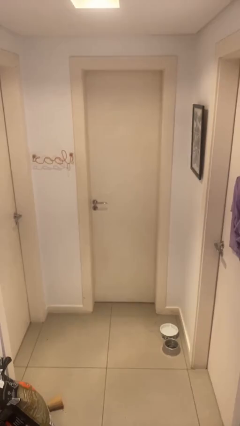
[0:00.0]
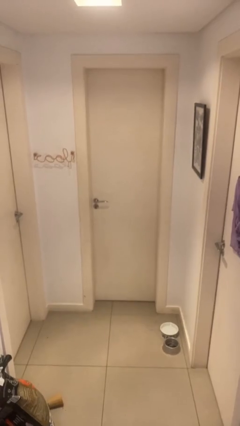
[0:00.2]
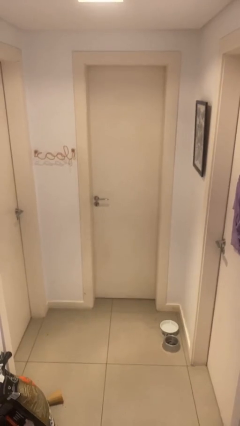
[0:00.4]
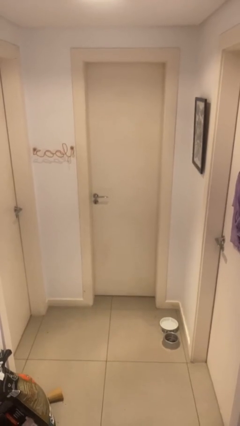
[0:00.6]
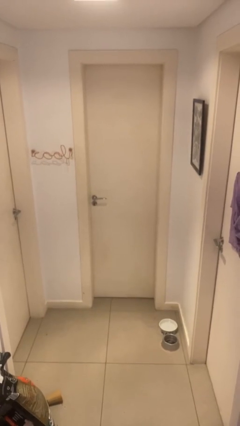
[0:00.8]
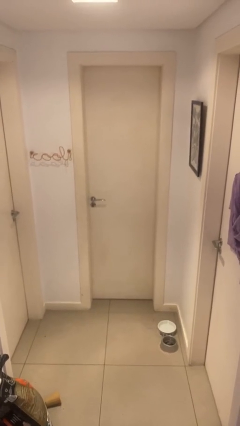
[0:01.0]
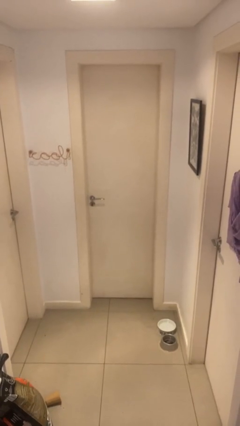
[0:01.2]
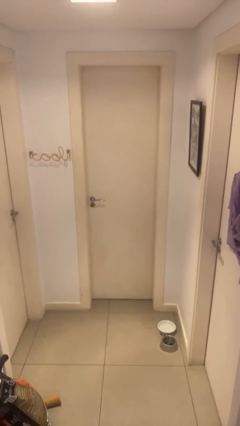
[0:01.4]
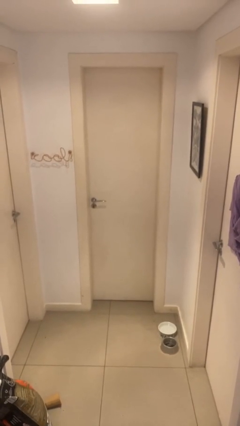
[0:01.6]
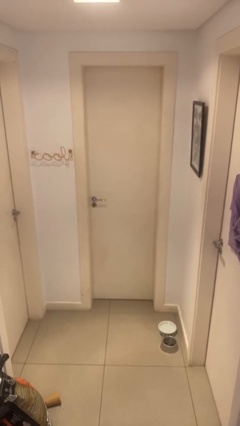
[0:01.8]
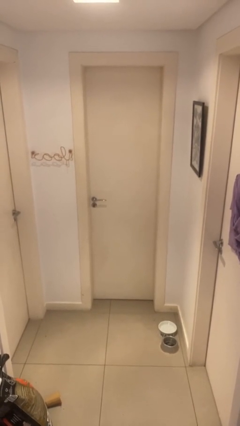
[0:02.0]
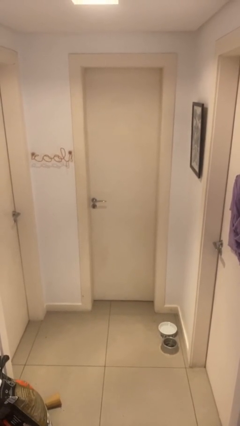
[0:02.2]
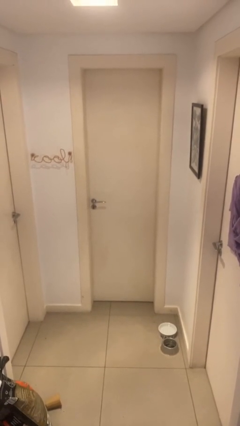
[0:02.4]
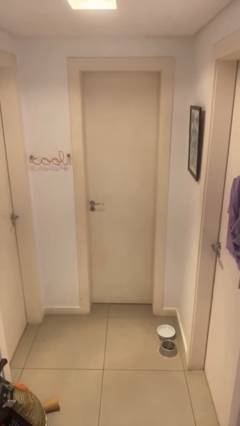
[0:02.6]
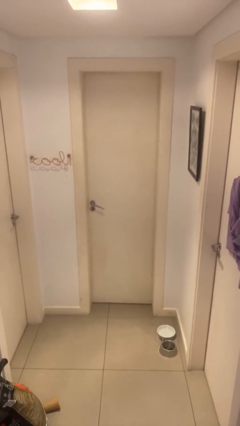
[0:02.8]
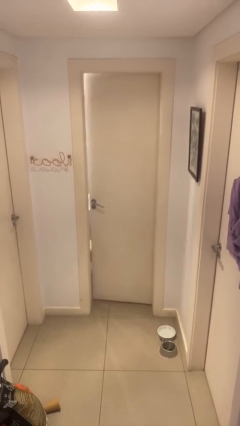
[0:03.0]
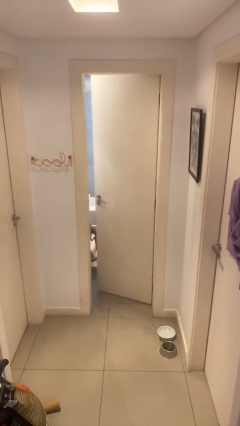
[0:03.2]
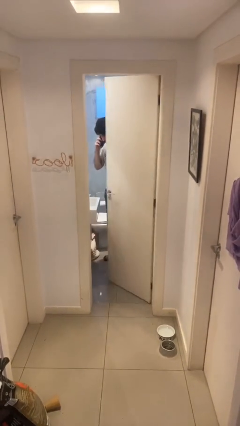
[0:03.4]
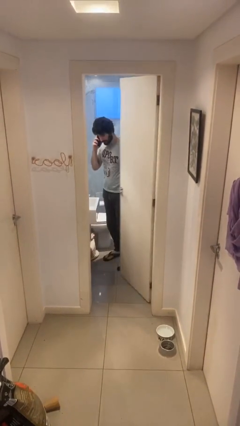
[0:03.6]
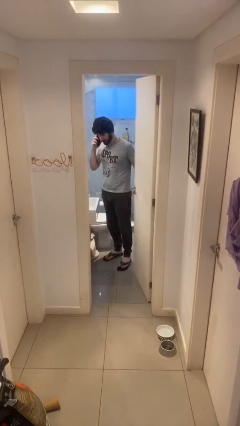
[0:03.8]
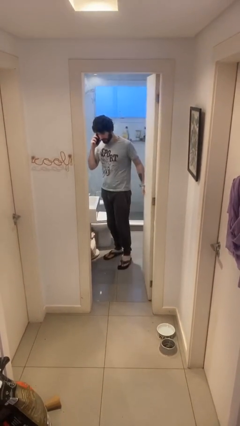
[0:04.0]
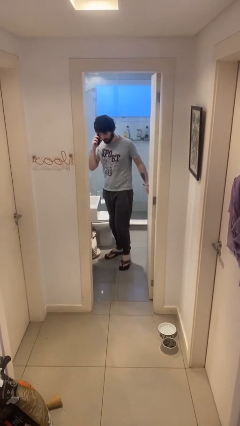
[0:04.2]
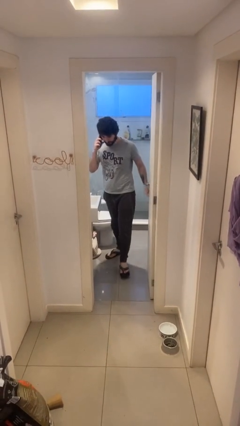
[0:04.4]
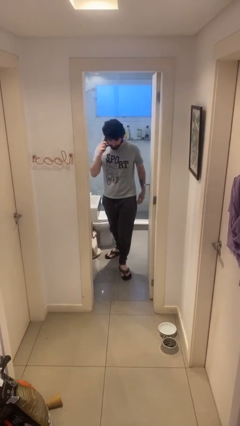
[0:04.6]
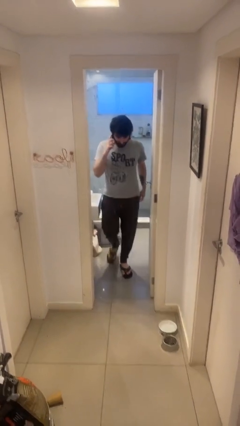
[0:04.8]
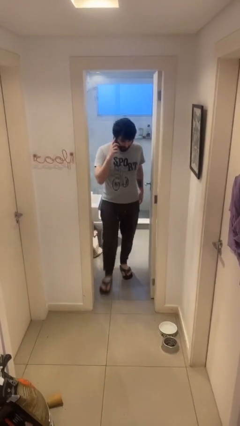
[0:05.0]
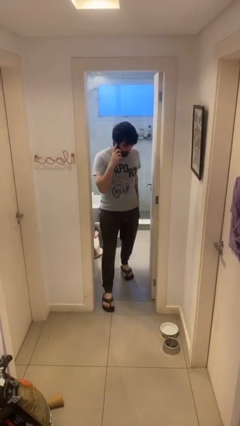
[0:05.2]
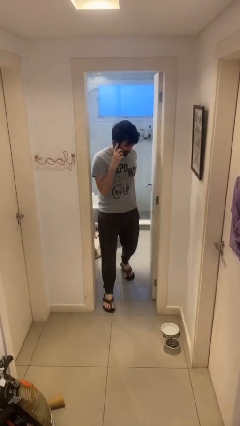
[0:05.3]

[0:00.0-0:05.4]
person opens facility door

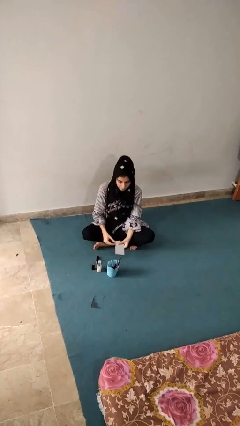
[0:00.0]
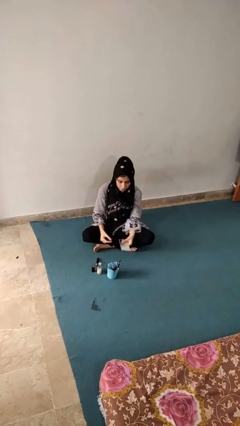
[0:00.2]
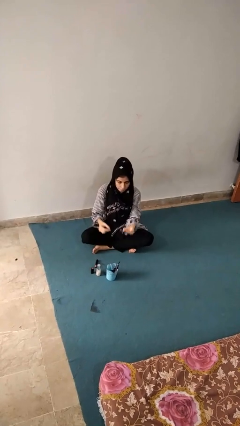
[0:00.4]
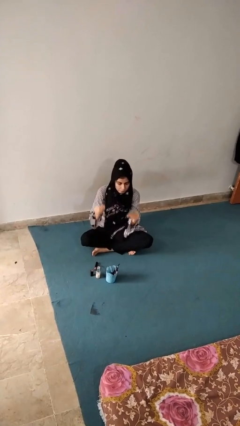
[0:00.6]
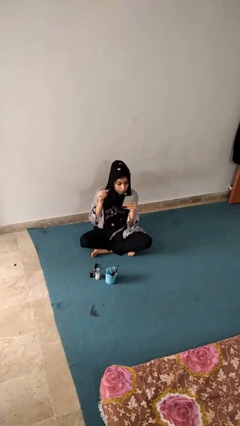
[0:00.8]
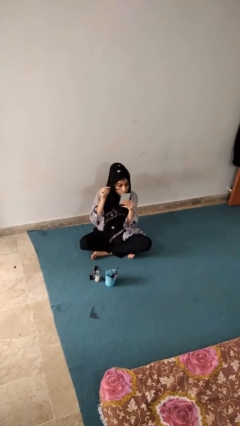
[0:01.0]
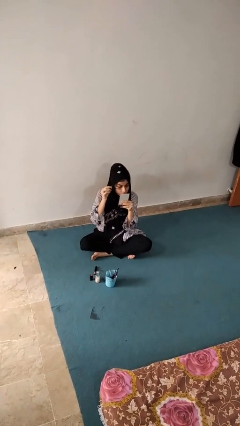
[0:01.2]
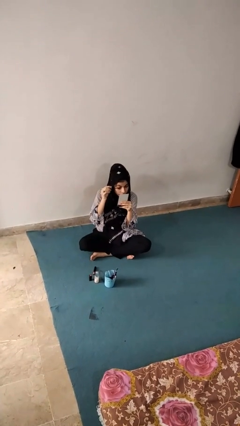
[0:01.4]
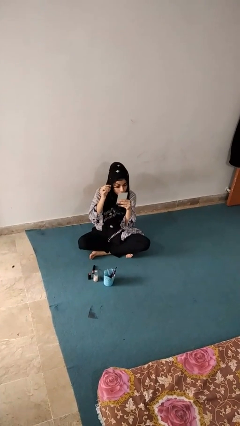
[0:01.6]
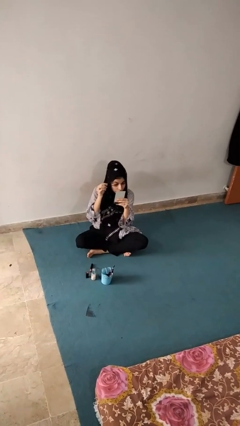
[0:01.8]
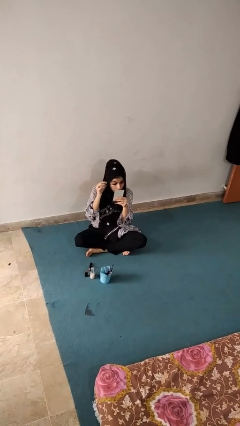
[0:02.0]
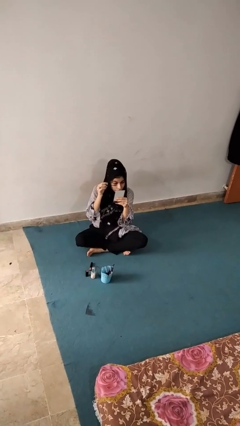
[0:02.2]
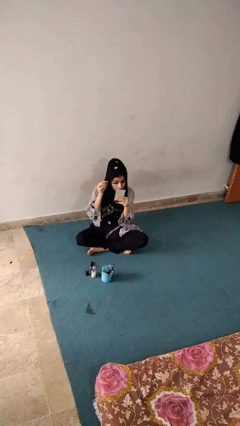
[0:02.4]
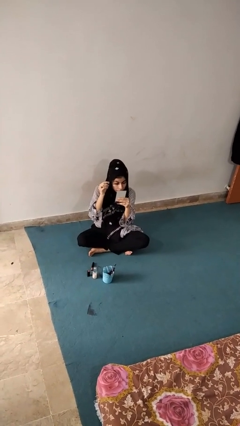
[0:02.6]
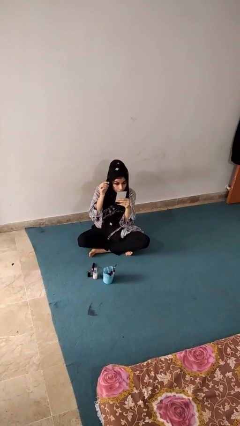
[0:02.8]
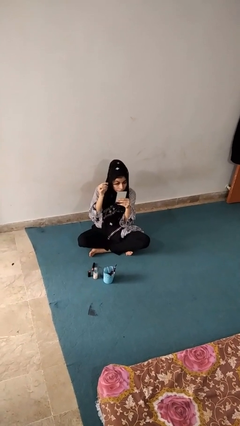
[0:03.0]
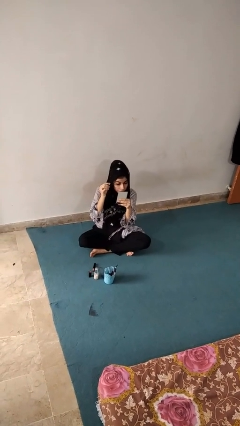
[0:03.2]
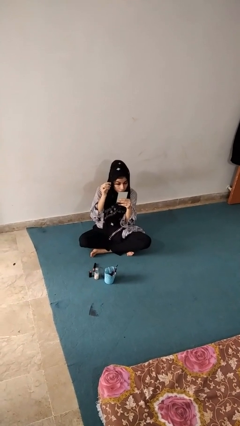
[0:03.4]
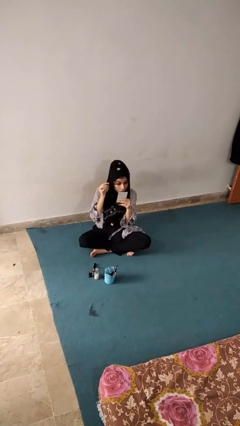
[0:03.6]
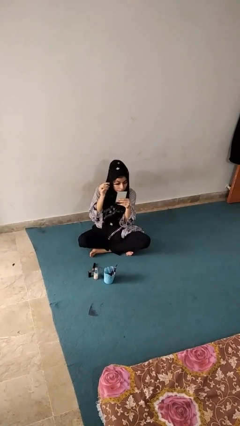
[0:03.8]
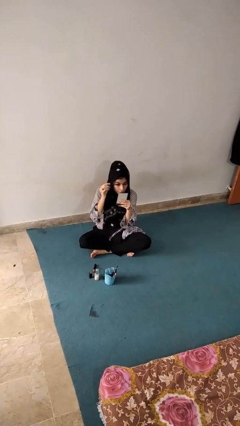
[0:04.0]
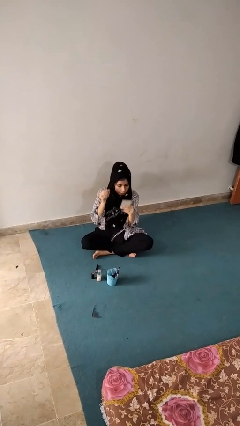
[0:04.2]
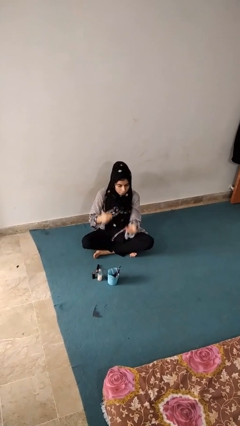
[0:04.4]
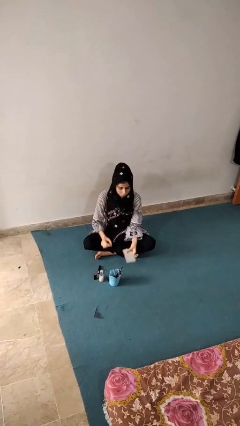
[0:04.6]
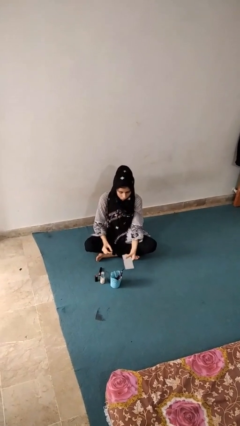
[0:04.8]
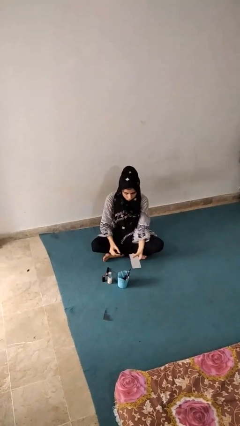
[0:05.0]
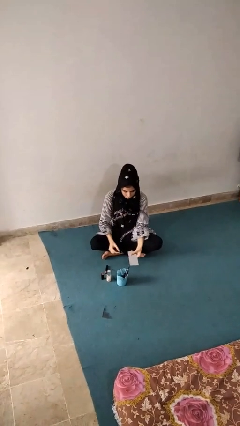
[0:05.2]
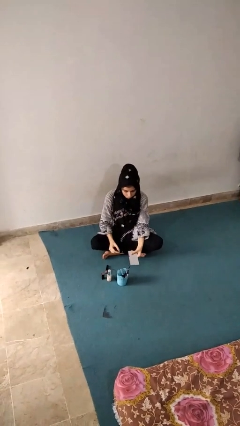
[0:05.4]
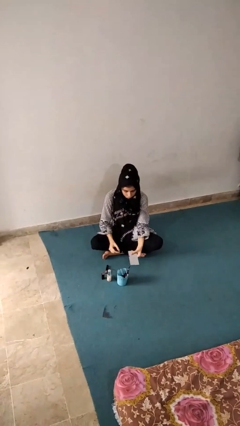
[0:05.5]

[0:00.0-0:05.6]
person applies eye makeup

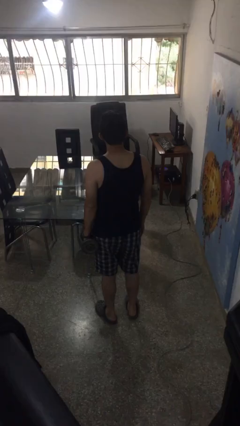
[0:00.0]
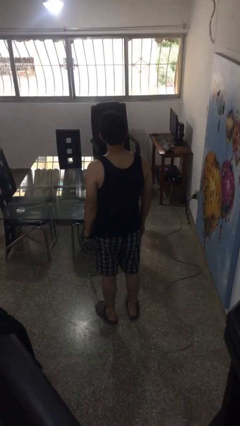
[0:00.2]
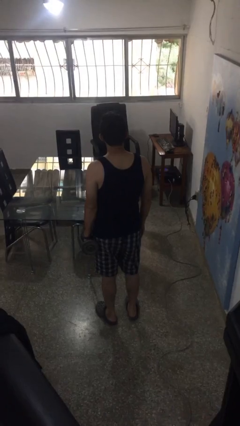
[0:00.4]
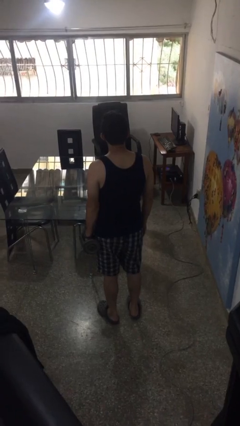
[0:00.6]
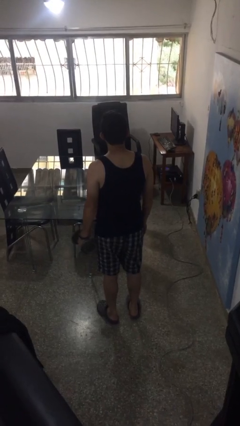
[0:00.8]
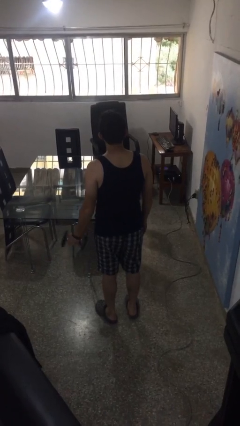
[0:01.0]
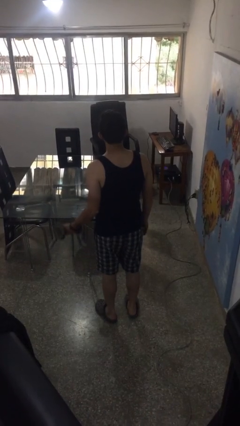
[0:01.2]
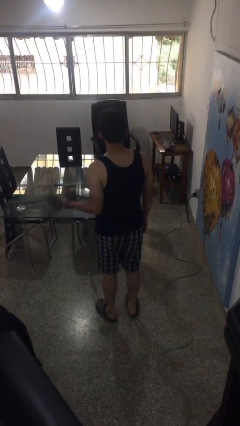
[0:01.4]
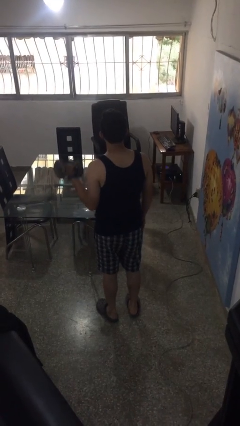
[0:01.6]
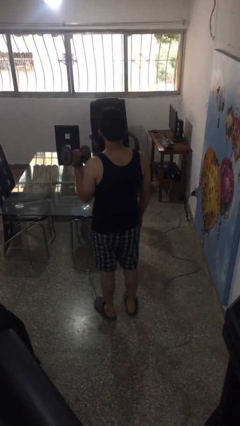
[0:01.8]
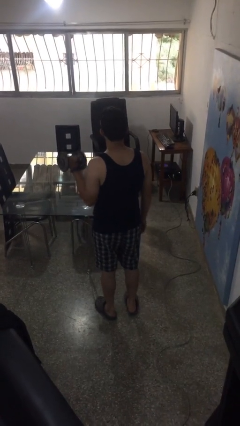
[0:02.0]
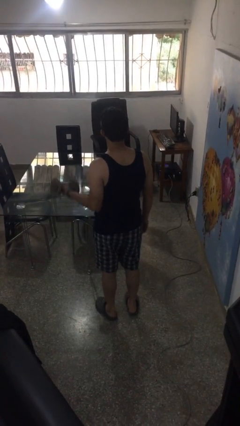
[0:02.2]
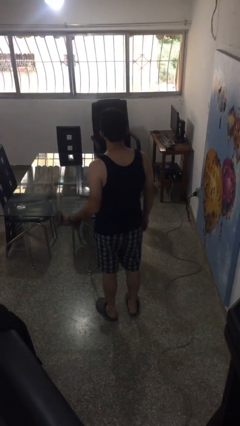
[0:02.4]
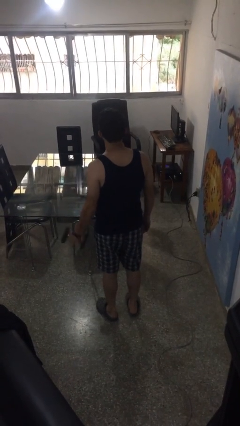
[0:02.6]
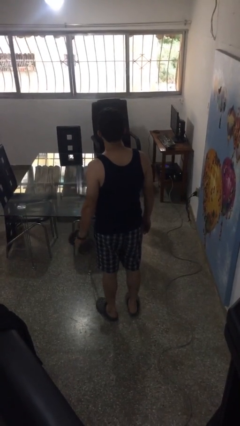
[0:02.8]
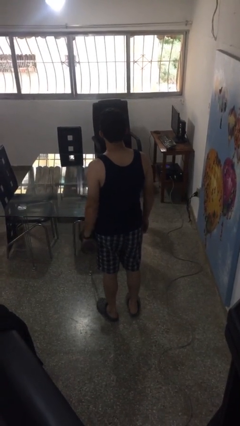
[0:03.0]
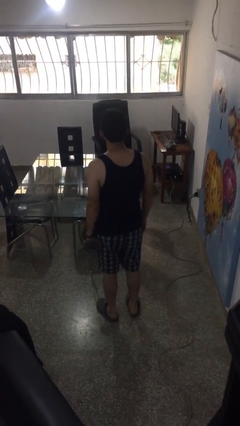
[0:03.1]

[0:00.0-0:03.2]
person lifts dumbbells

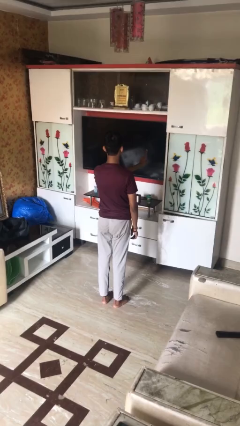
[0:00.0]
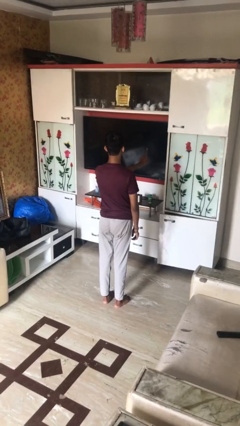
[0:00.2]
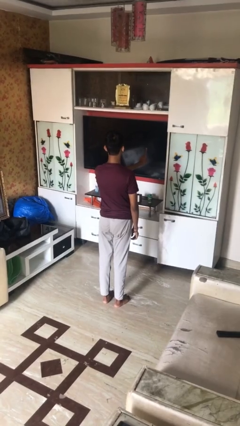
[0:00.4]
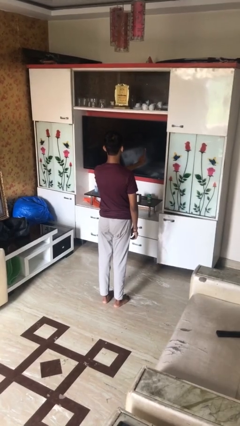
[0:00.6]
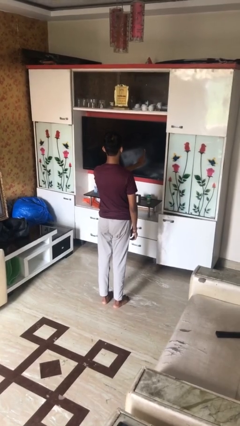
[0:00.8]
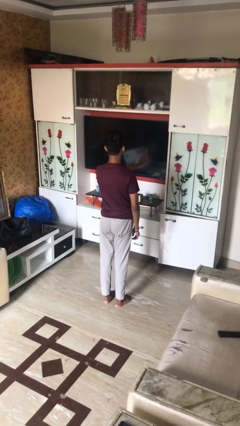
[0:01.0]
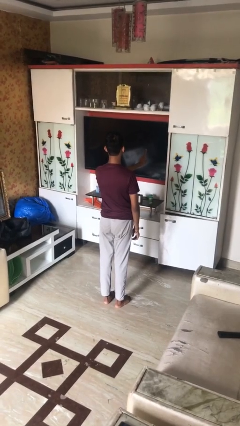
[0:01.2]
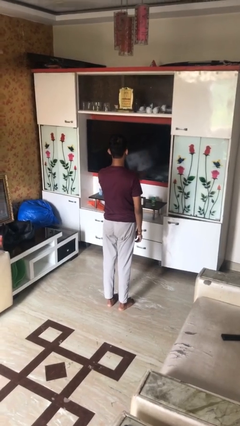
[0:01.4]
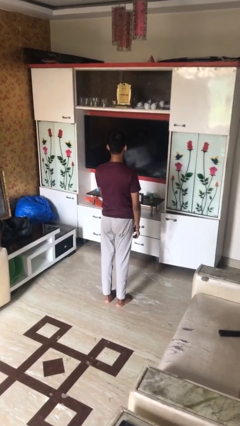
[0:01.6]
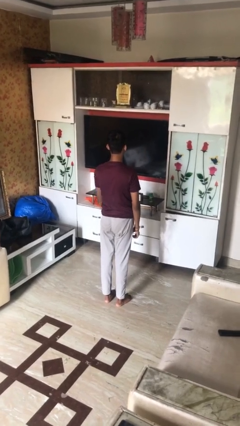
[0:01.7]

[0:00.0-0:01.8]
person gestures number one

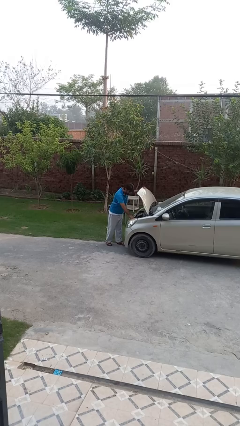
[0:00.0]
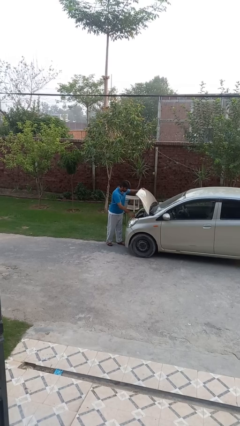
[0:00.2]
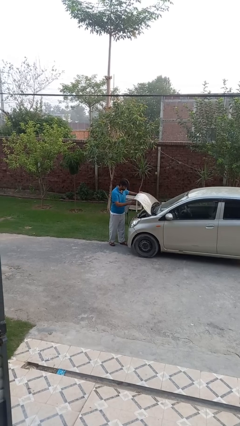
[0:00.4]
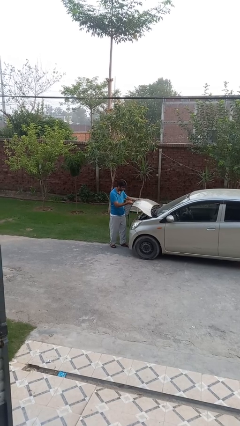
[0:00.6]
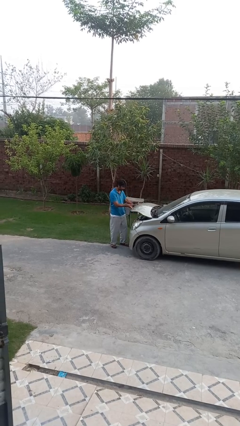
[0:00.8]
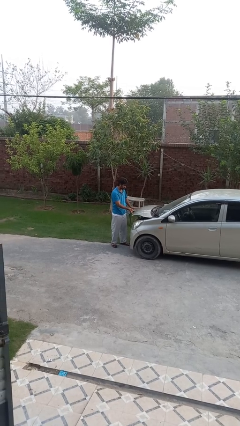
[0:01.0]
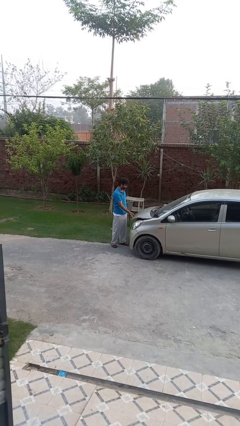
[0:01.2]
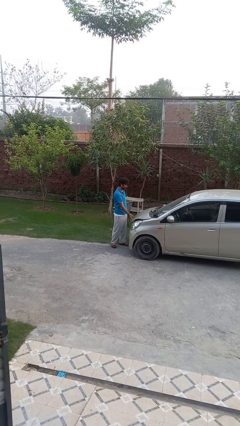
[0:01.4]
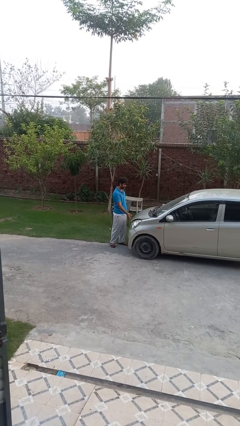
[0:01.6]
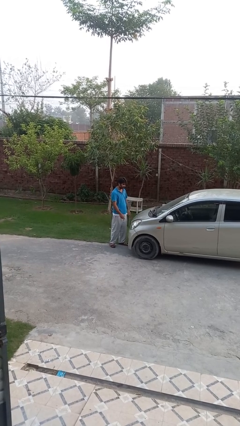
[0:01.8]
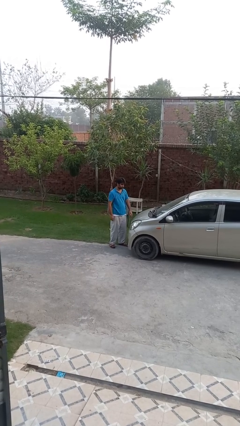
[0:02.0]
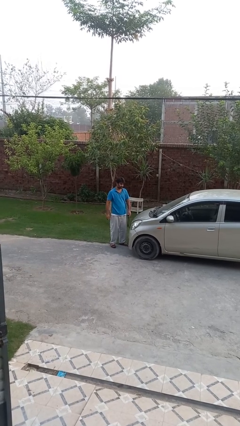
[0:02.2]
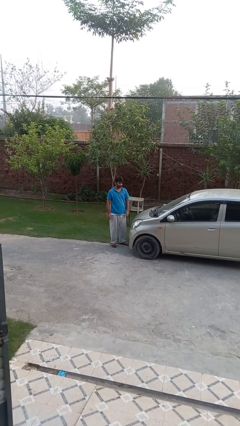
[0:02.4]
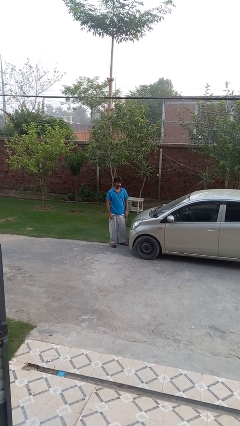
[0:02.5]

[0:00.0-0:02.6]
person closes car hood
